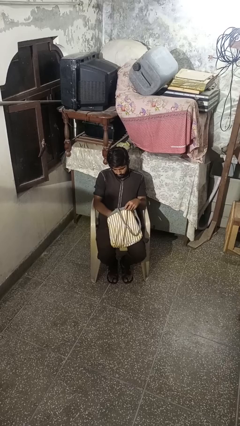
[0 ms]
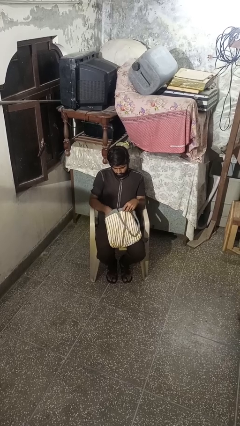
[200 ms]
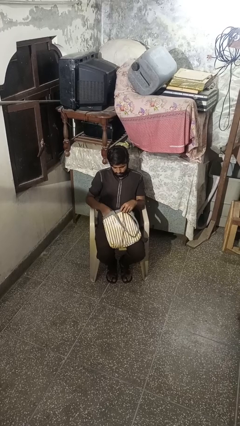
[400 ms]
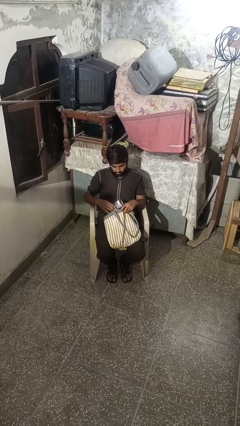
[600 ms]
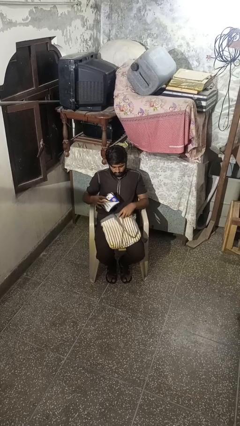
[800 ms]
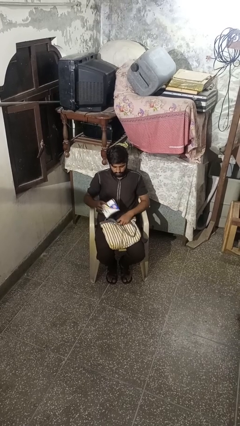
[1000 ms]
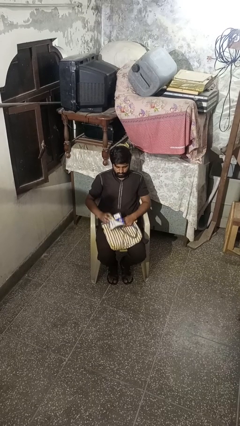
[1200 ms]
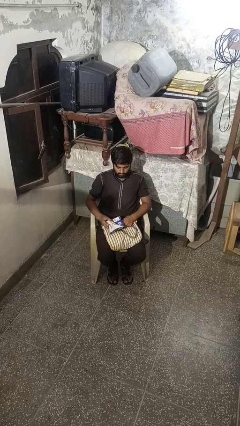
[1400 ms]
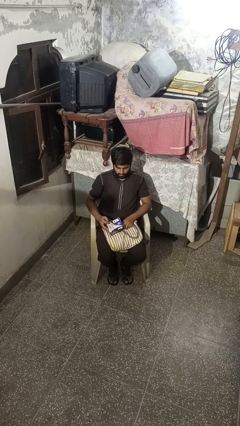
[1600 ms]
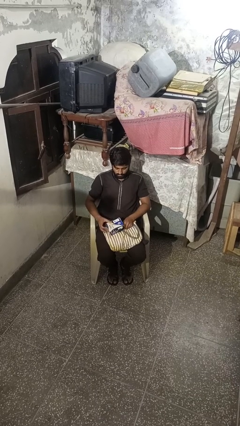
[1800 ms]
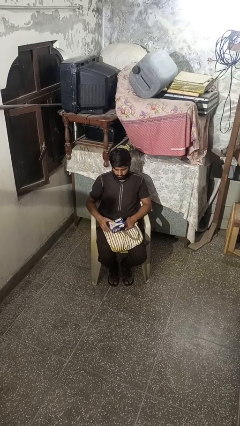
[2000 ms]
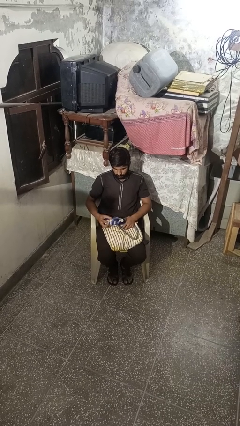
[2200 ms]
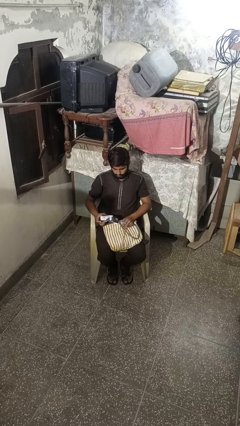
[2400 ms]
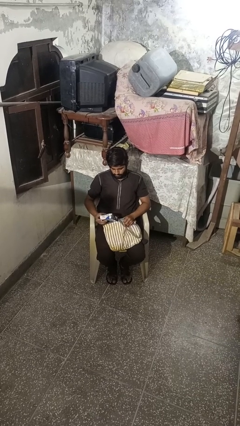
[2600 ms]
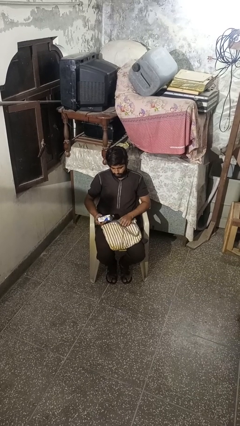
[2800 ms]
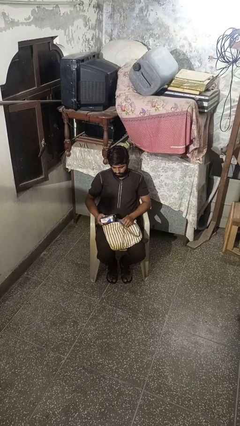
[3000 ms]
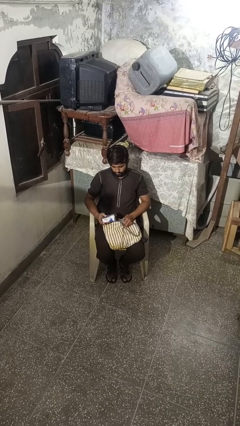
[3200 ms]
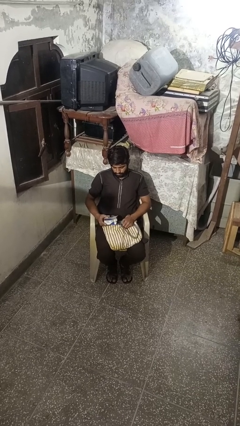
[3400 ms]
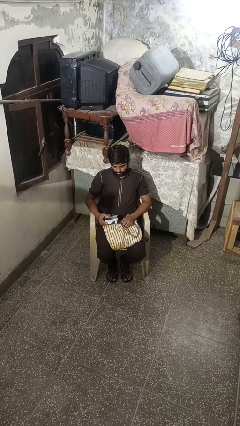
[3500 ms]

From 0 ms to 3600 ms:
person takes object from backpack

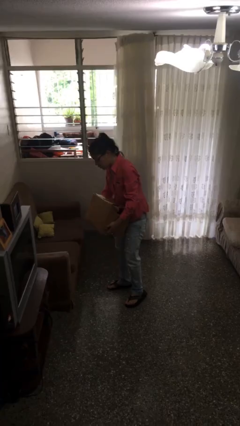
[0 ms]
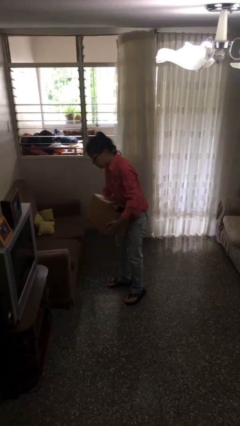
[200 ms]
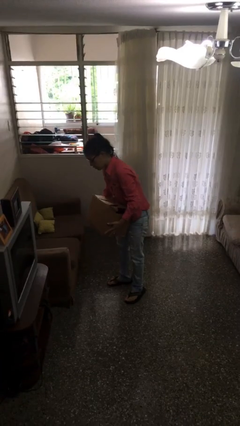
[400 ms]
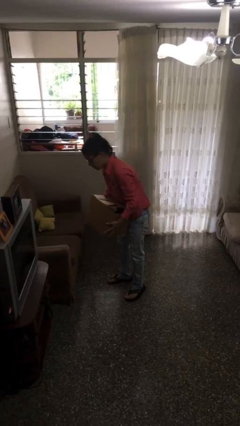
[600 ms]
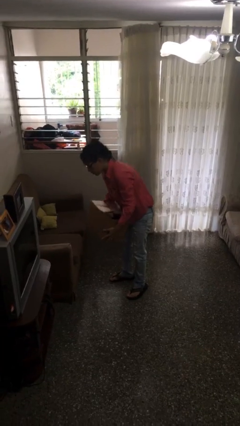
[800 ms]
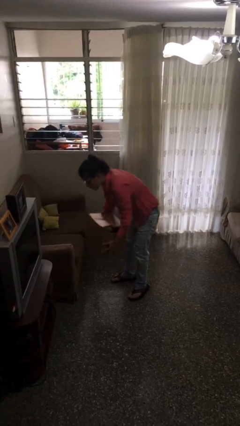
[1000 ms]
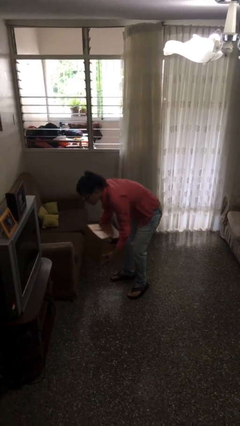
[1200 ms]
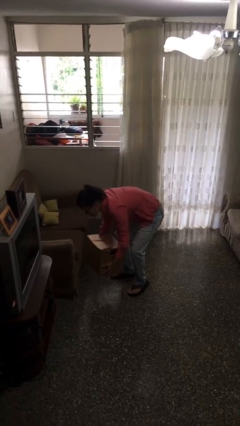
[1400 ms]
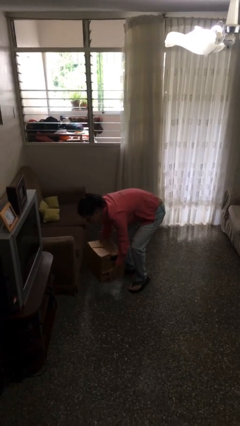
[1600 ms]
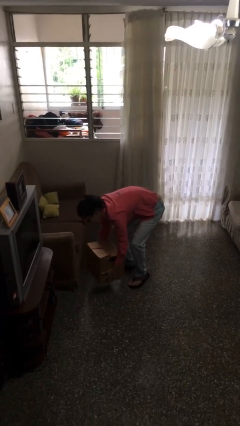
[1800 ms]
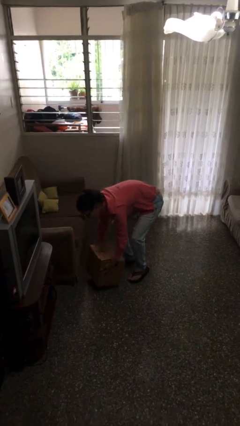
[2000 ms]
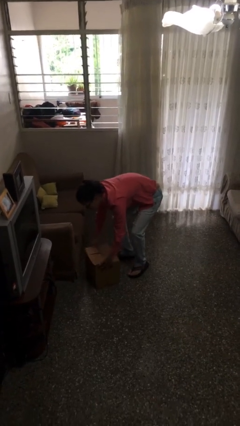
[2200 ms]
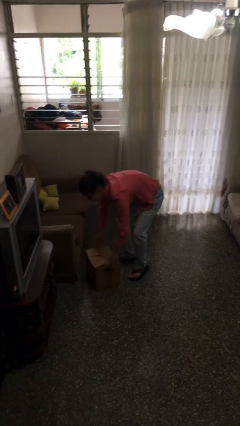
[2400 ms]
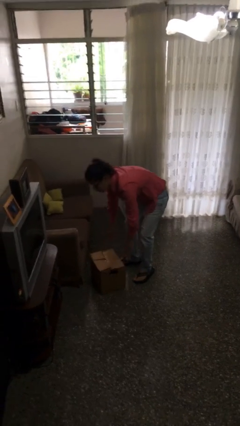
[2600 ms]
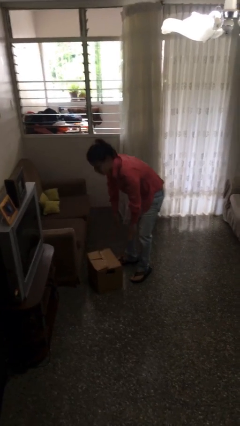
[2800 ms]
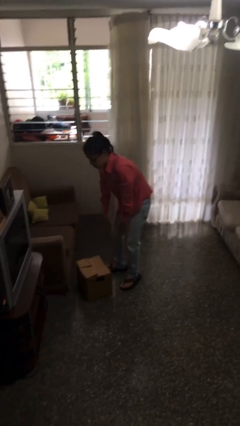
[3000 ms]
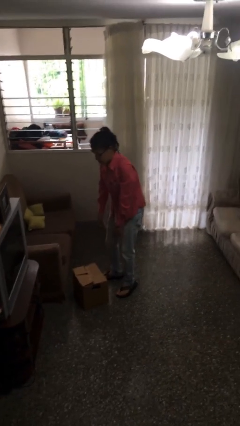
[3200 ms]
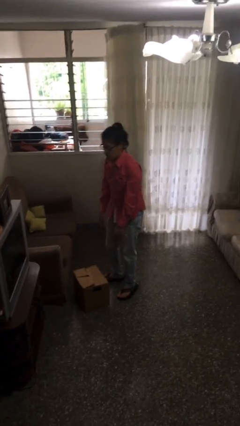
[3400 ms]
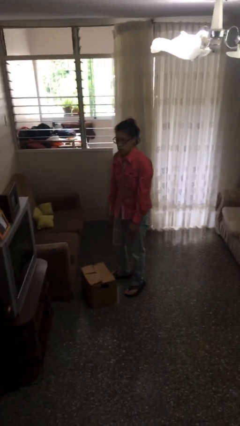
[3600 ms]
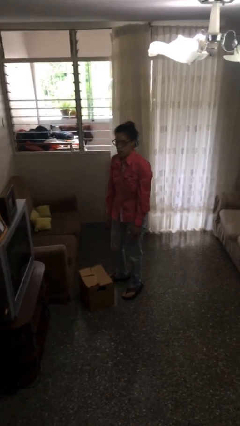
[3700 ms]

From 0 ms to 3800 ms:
person puts down object on floor

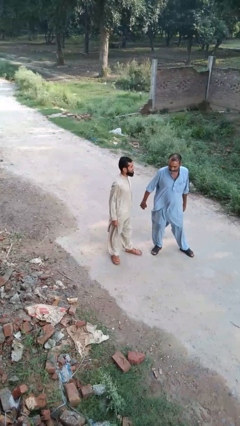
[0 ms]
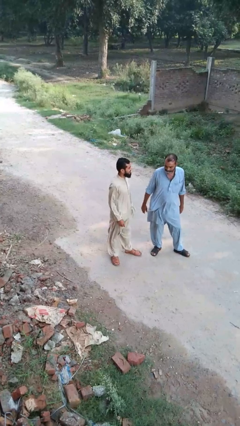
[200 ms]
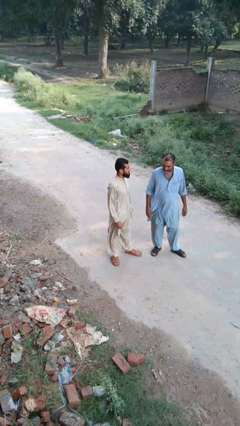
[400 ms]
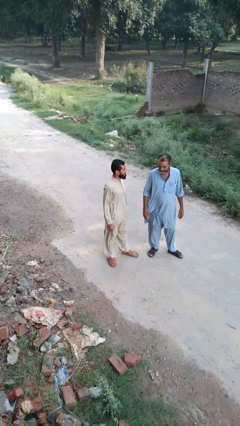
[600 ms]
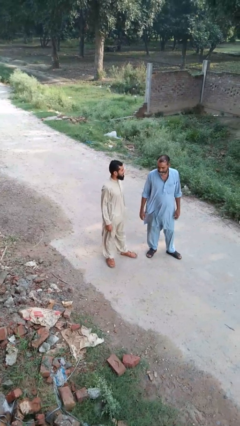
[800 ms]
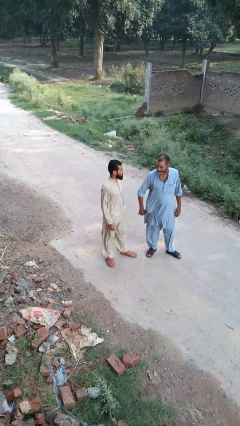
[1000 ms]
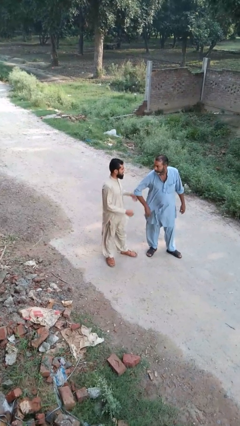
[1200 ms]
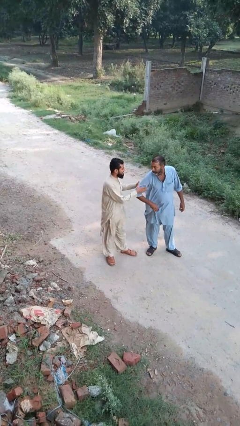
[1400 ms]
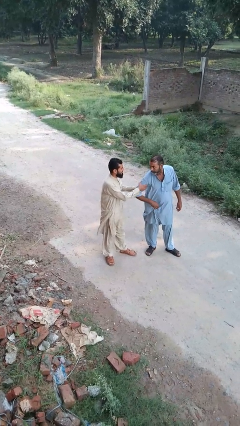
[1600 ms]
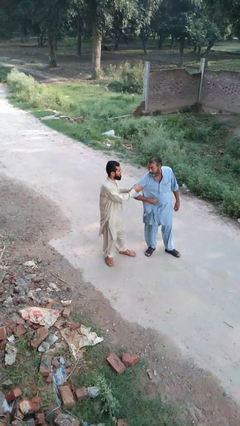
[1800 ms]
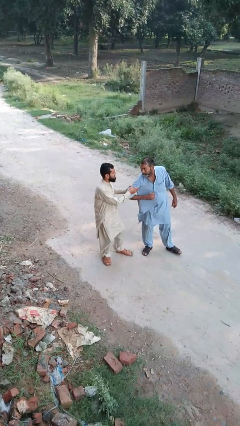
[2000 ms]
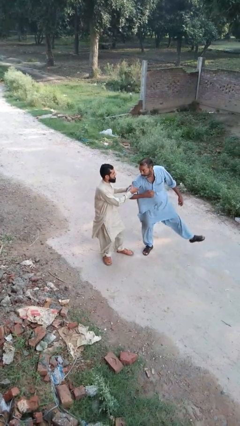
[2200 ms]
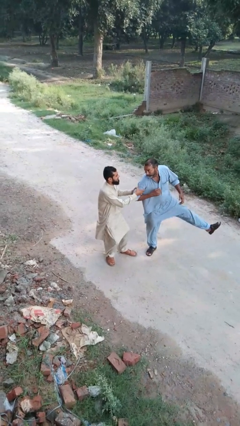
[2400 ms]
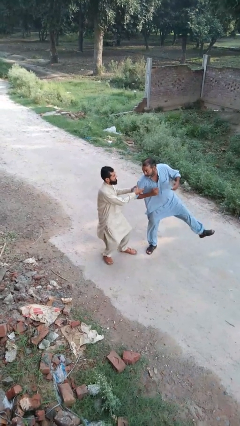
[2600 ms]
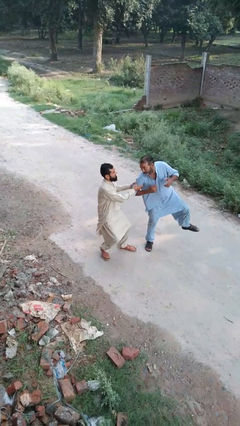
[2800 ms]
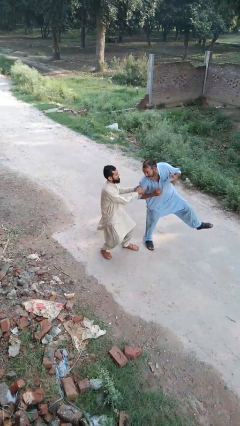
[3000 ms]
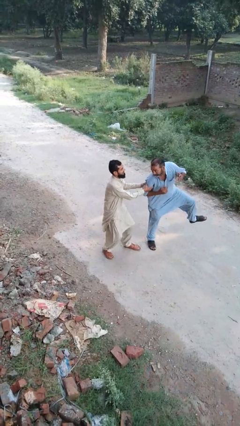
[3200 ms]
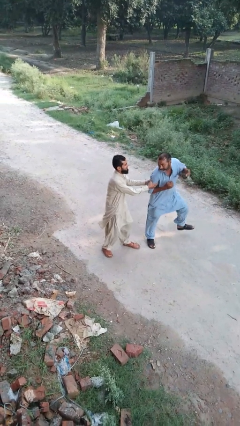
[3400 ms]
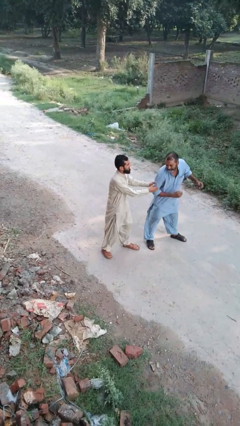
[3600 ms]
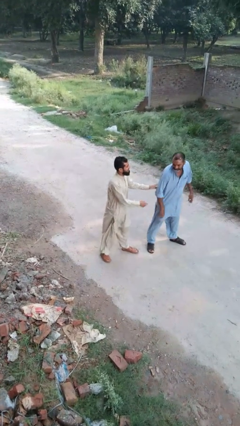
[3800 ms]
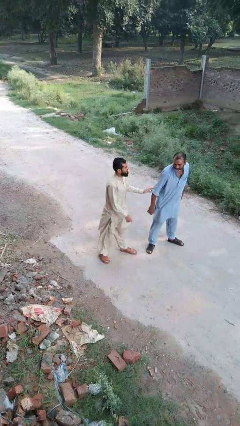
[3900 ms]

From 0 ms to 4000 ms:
person grabs person by forearm

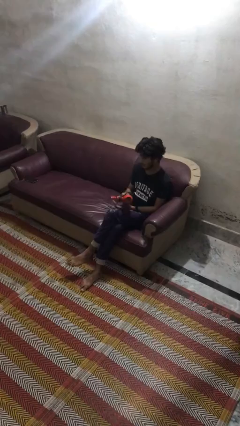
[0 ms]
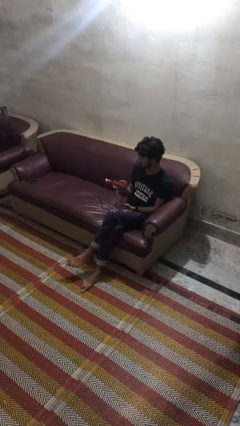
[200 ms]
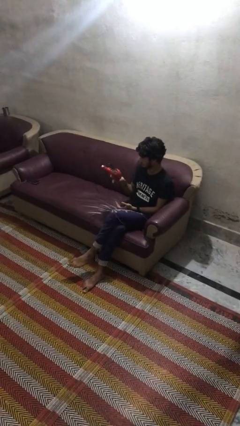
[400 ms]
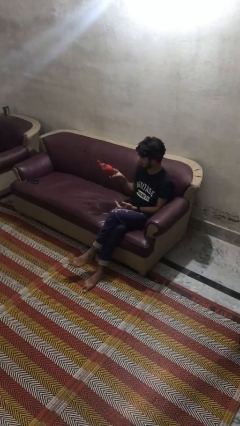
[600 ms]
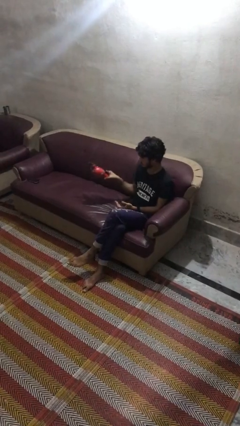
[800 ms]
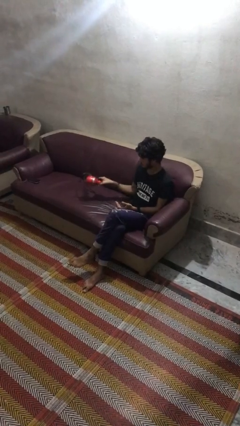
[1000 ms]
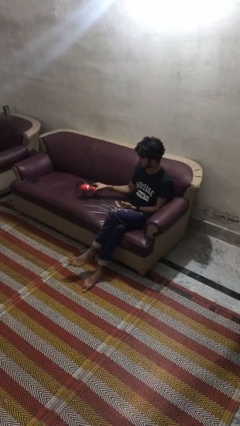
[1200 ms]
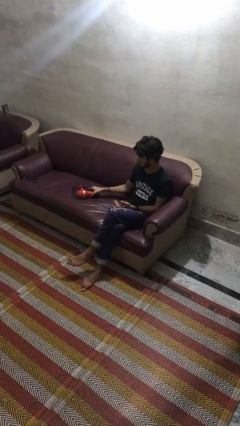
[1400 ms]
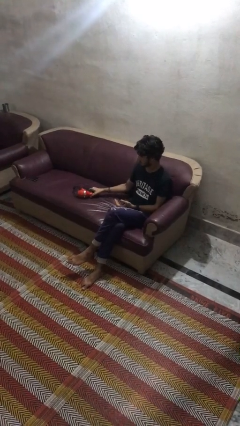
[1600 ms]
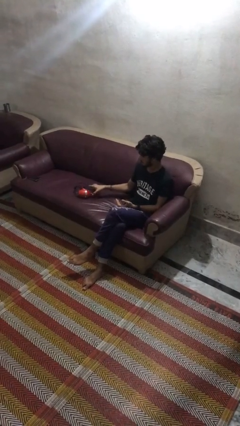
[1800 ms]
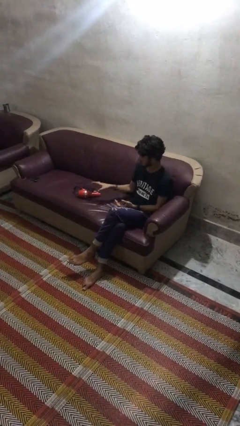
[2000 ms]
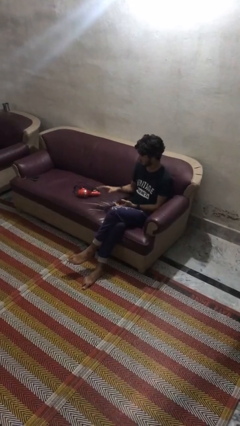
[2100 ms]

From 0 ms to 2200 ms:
person puts down object on couch

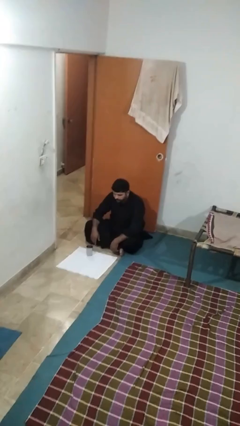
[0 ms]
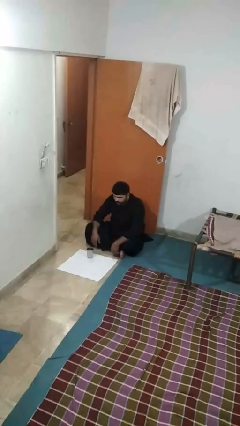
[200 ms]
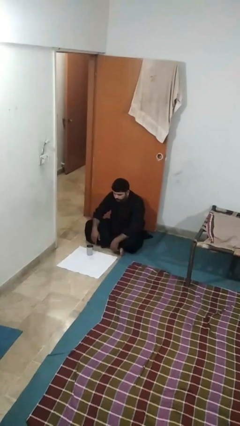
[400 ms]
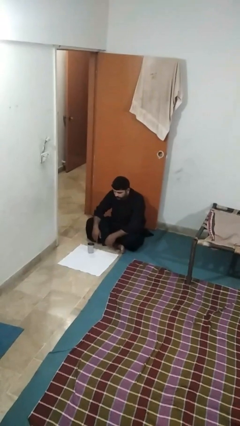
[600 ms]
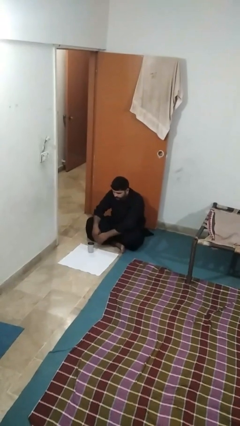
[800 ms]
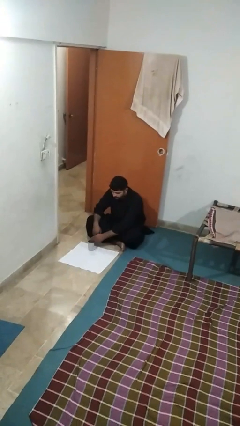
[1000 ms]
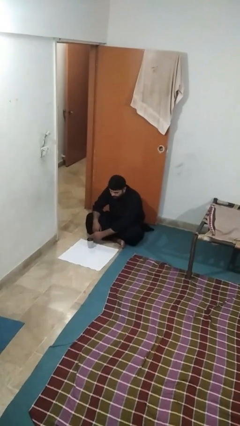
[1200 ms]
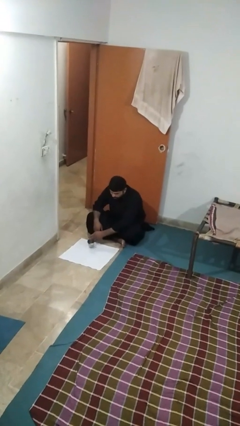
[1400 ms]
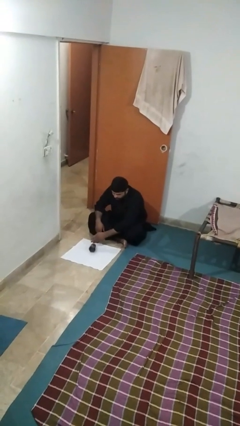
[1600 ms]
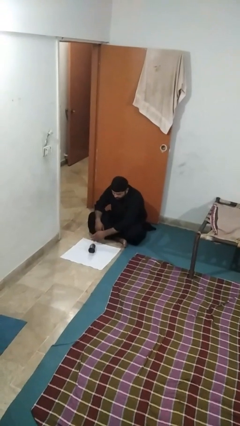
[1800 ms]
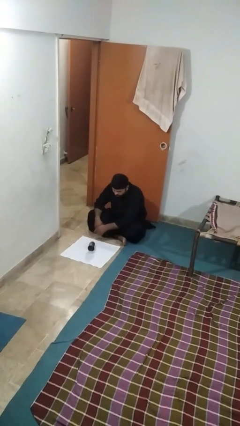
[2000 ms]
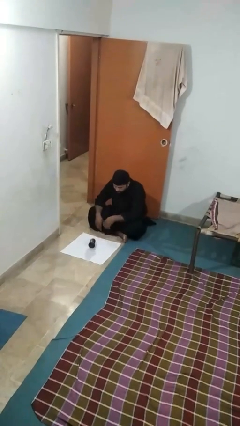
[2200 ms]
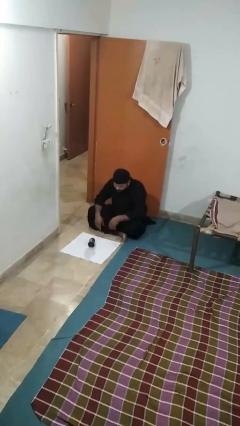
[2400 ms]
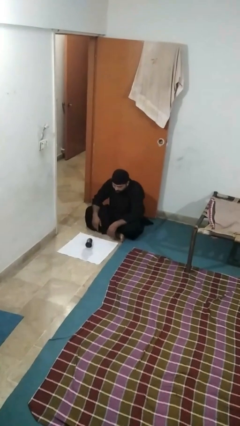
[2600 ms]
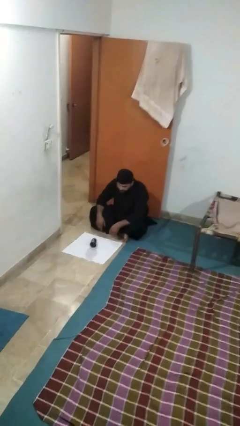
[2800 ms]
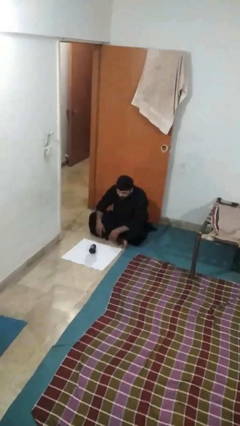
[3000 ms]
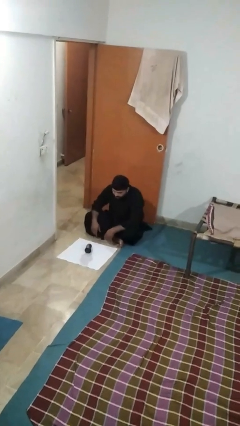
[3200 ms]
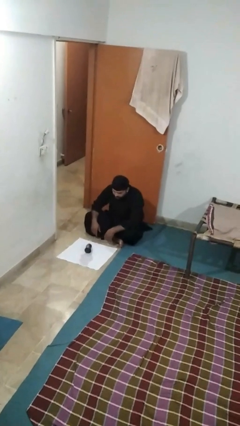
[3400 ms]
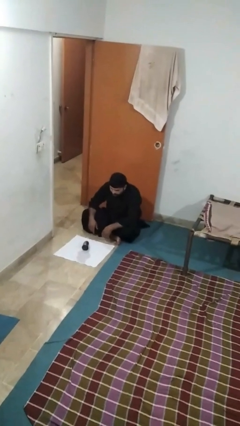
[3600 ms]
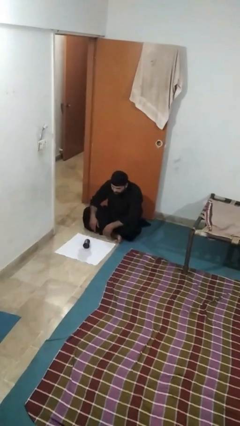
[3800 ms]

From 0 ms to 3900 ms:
person spills on floor

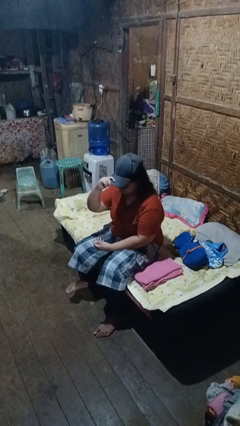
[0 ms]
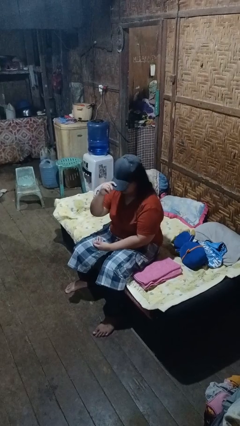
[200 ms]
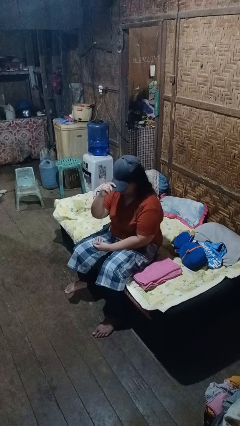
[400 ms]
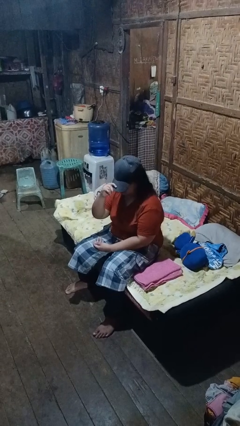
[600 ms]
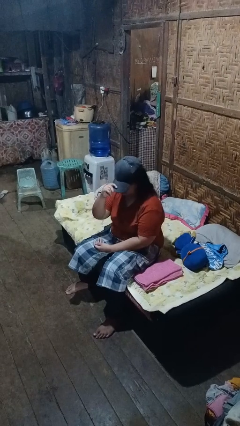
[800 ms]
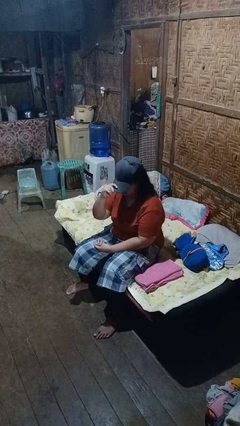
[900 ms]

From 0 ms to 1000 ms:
person puts on hat
